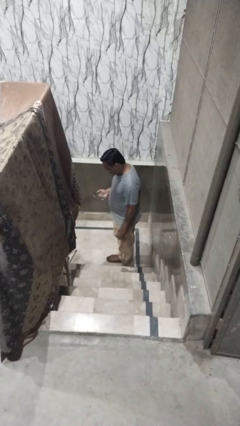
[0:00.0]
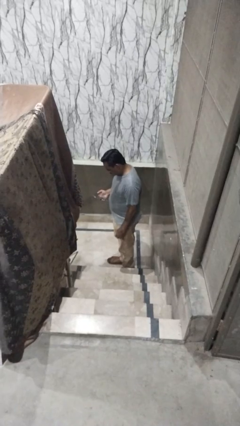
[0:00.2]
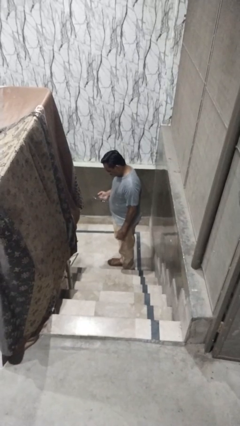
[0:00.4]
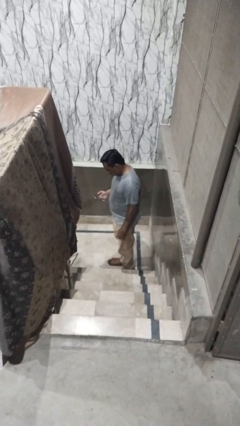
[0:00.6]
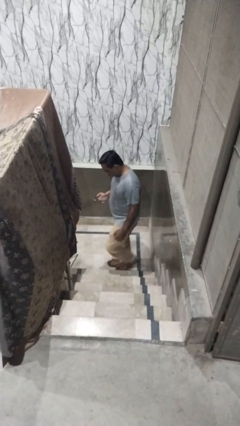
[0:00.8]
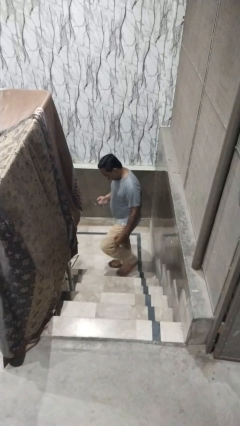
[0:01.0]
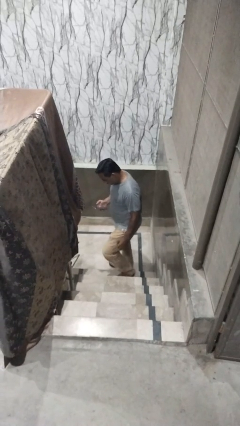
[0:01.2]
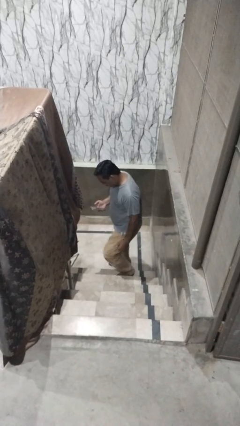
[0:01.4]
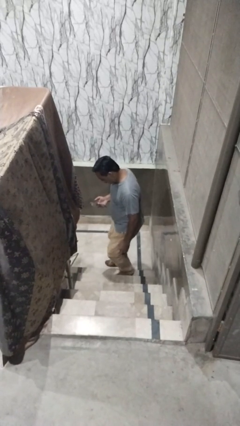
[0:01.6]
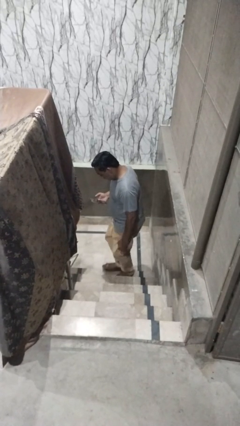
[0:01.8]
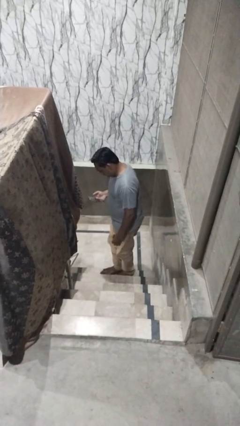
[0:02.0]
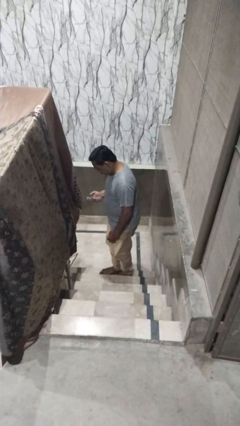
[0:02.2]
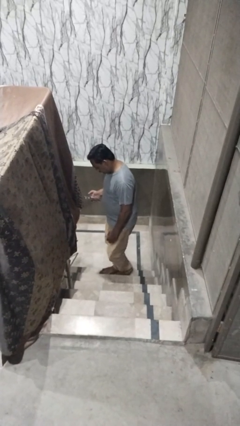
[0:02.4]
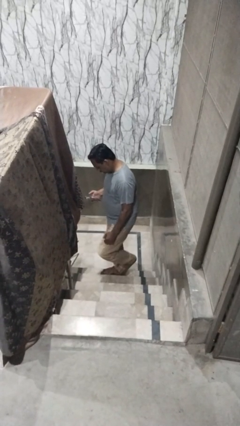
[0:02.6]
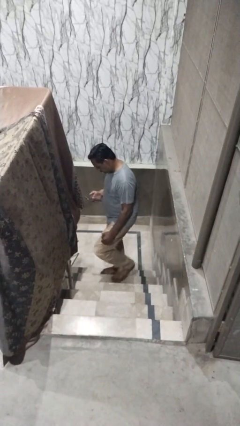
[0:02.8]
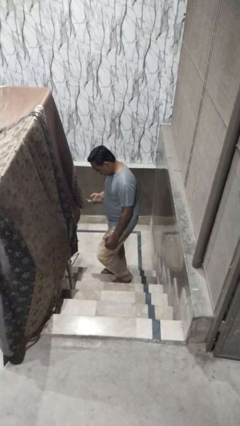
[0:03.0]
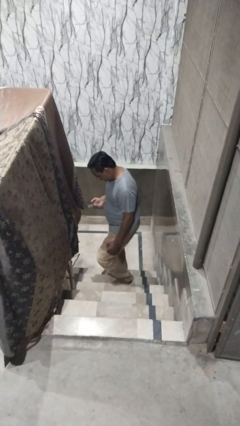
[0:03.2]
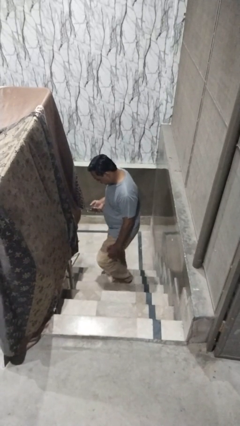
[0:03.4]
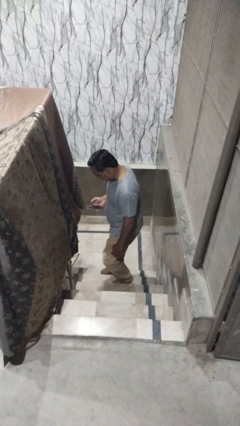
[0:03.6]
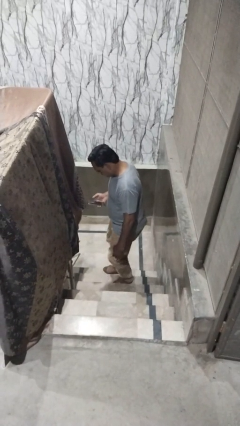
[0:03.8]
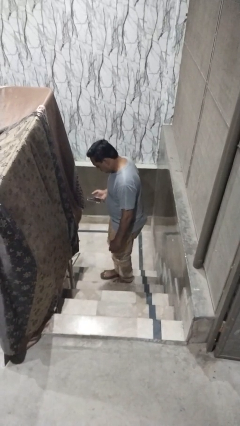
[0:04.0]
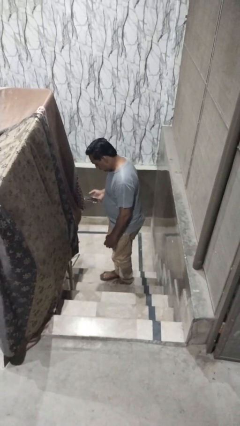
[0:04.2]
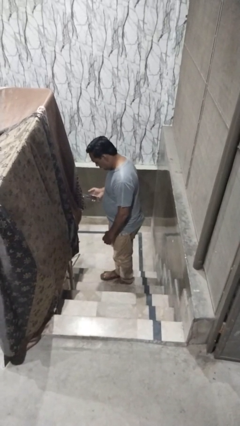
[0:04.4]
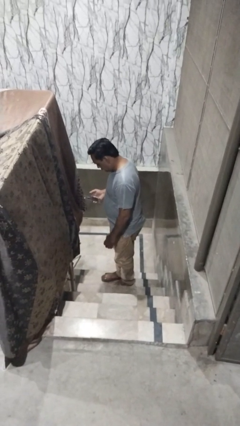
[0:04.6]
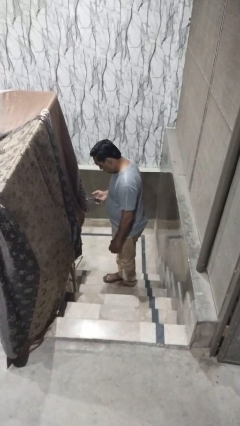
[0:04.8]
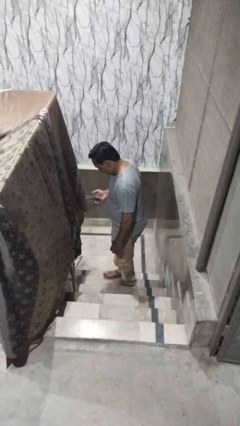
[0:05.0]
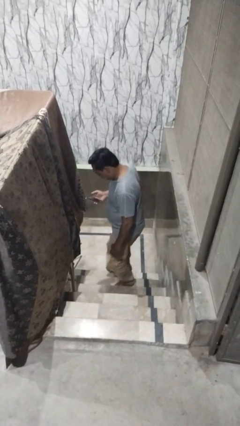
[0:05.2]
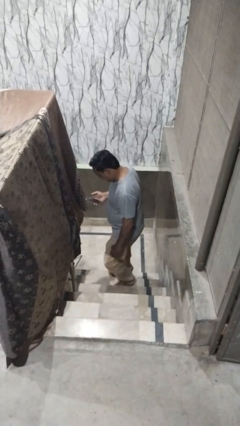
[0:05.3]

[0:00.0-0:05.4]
person climbs up stairs

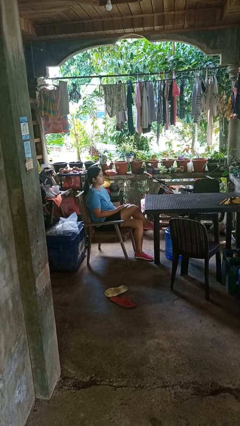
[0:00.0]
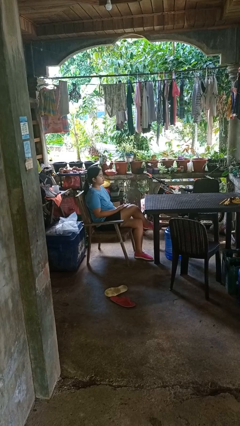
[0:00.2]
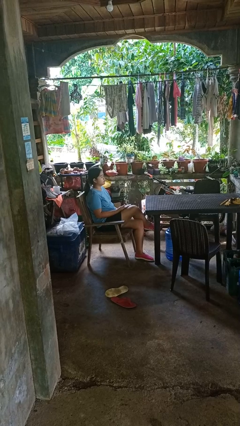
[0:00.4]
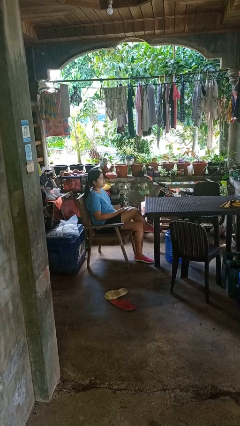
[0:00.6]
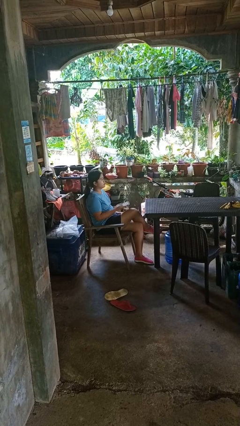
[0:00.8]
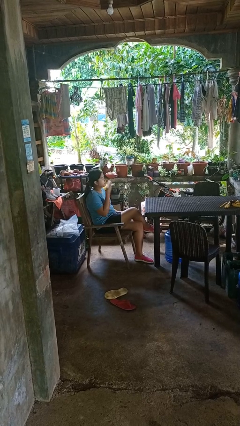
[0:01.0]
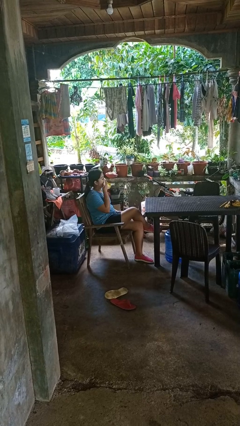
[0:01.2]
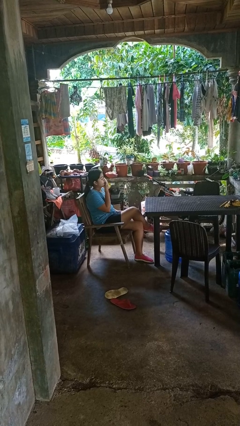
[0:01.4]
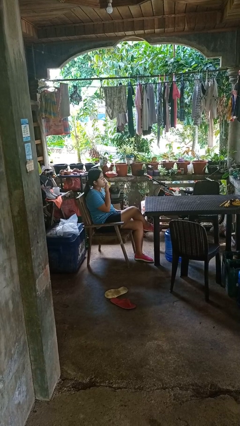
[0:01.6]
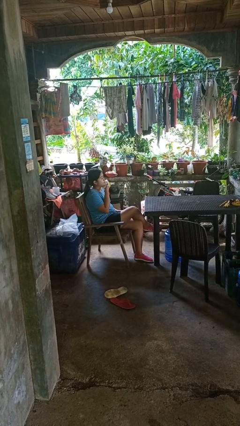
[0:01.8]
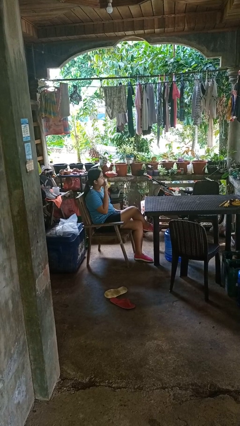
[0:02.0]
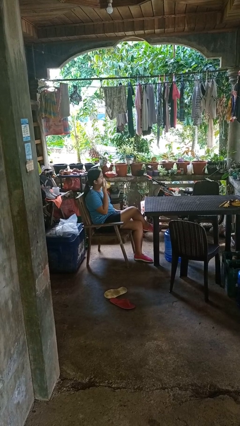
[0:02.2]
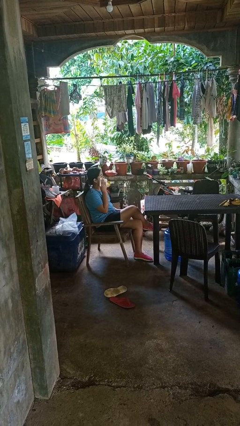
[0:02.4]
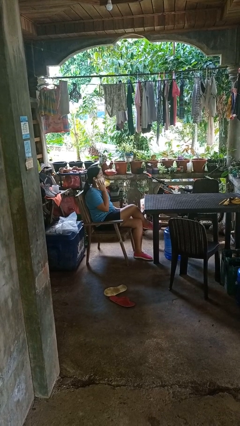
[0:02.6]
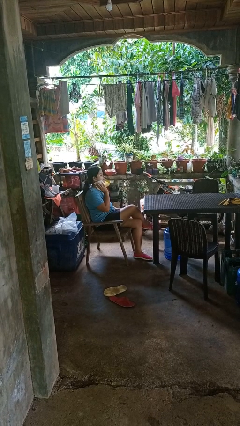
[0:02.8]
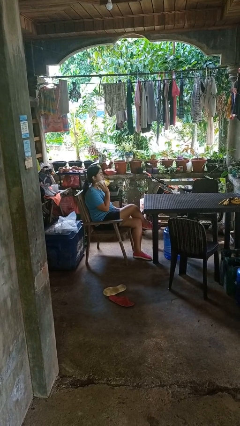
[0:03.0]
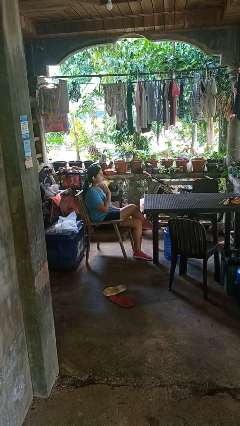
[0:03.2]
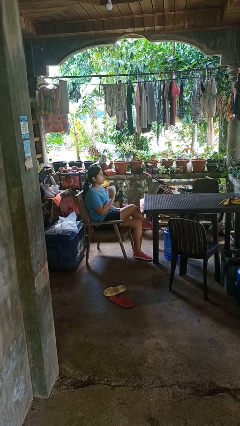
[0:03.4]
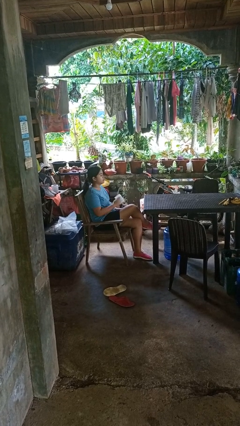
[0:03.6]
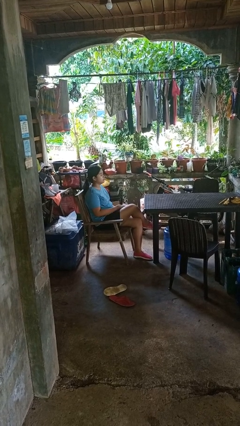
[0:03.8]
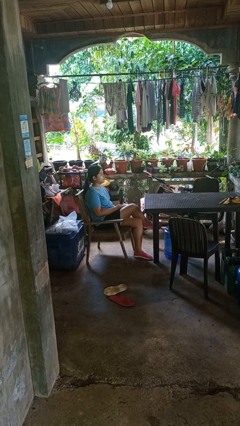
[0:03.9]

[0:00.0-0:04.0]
person wipes mouth with napkin

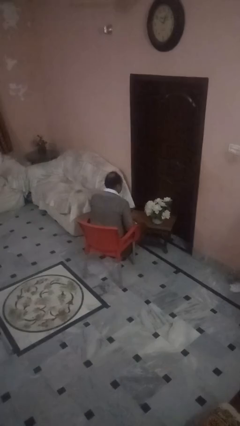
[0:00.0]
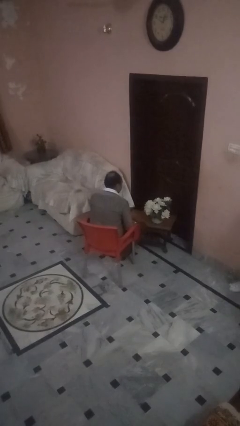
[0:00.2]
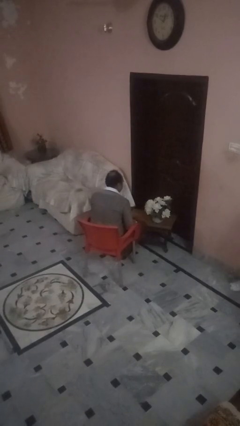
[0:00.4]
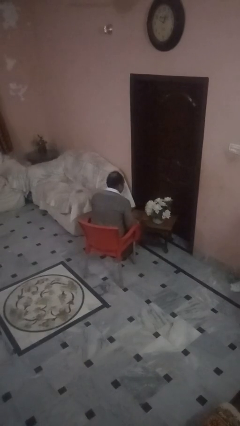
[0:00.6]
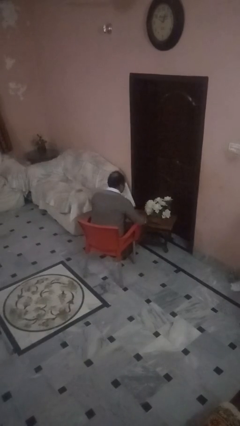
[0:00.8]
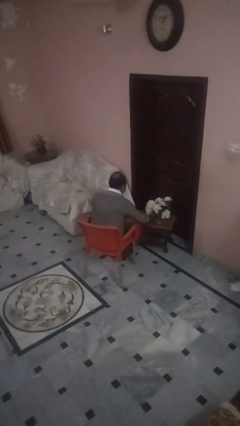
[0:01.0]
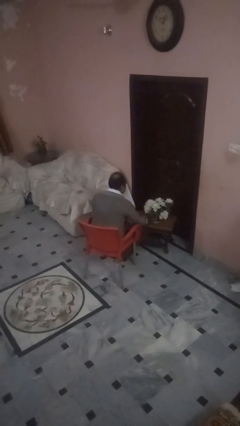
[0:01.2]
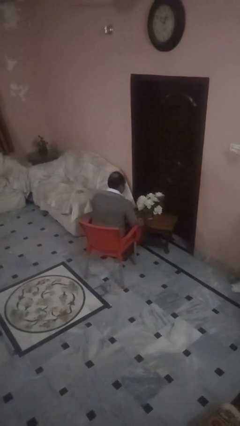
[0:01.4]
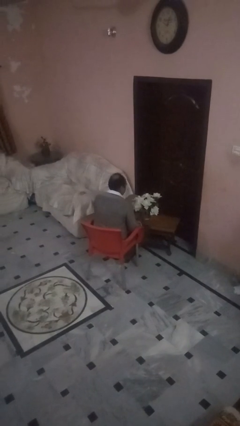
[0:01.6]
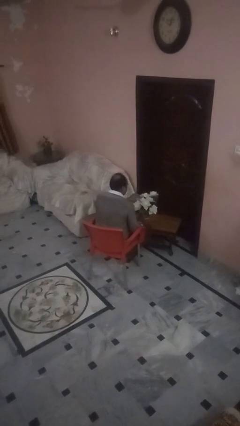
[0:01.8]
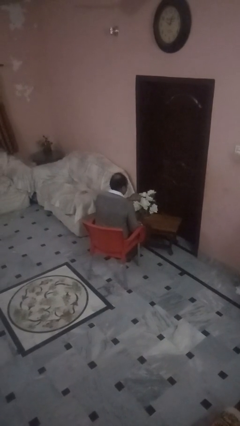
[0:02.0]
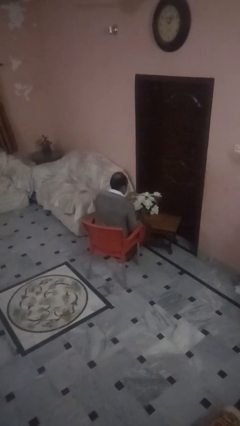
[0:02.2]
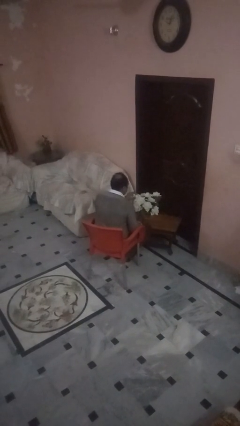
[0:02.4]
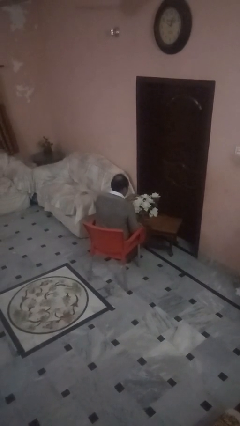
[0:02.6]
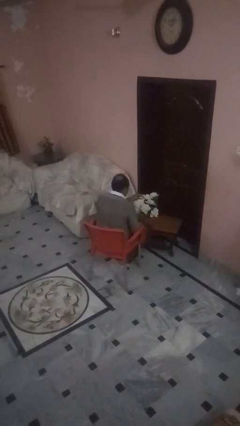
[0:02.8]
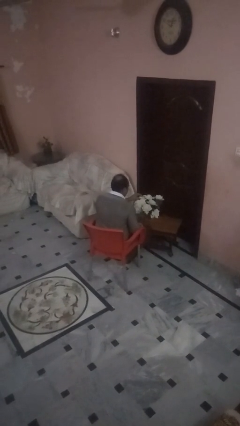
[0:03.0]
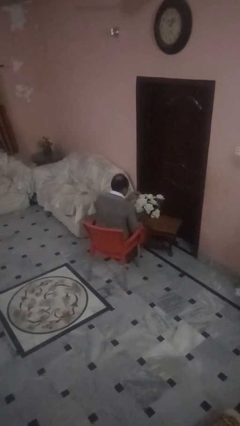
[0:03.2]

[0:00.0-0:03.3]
person arranges flowers in vase

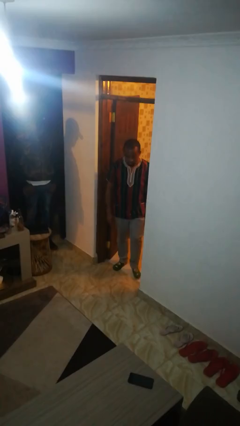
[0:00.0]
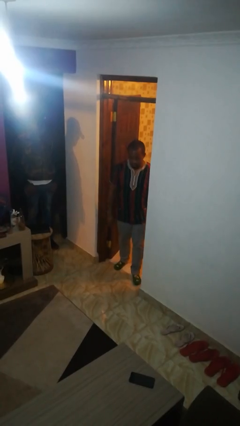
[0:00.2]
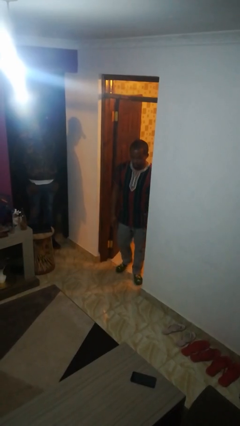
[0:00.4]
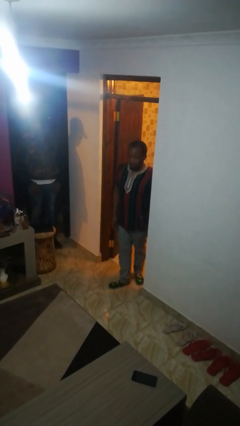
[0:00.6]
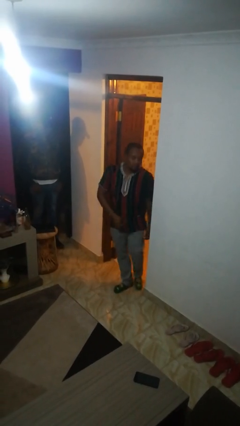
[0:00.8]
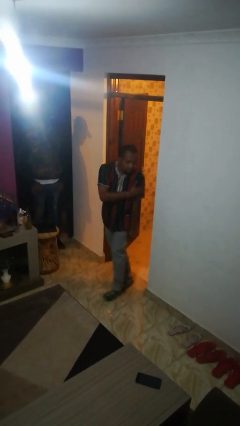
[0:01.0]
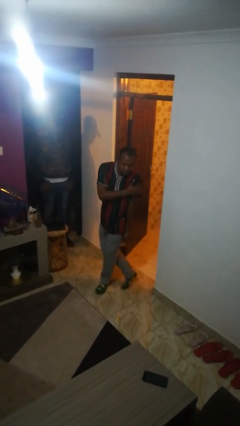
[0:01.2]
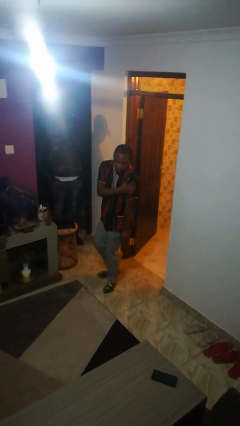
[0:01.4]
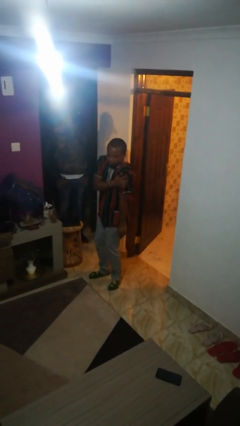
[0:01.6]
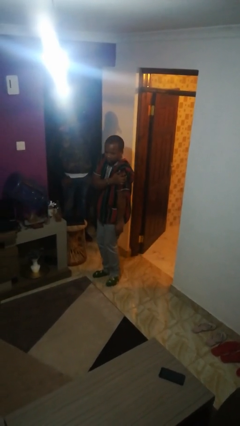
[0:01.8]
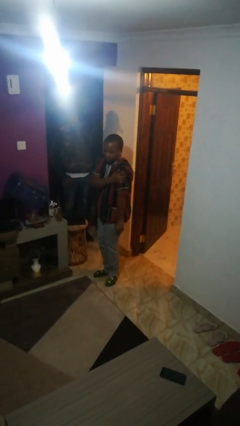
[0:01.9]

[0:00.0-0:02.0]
person bumps into wall

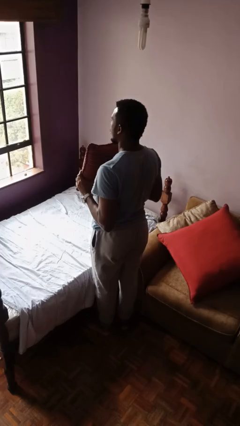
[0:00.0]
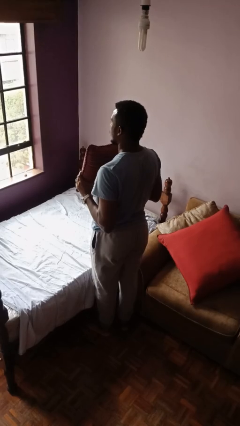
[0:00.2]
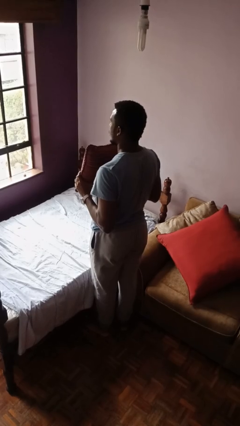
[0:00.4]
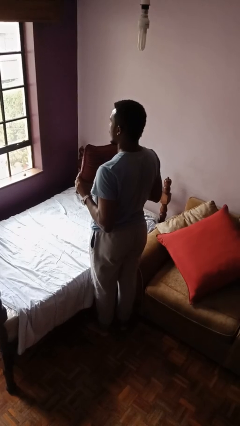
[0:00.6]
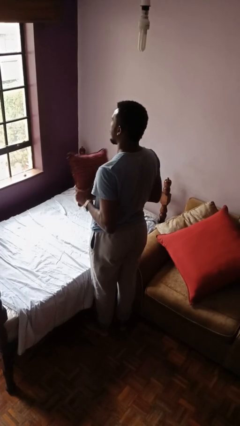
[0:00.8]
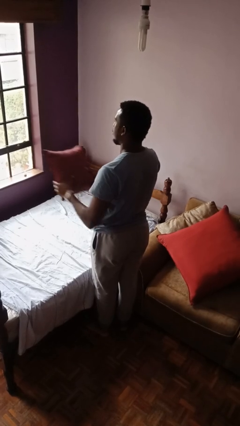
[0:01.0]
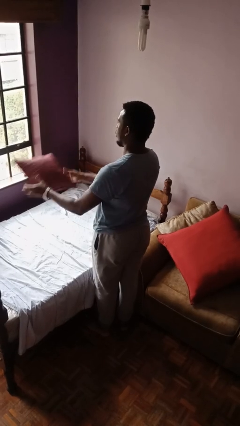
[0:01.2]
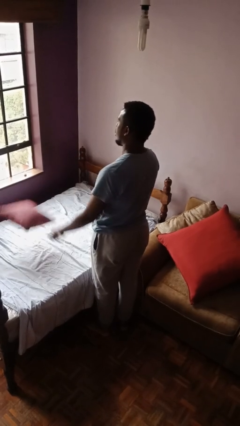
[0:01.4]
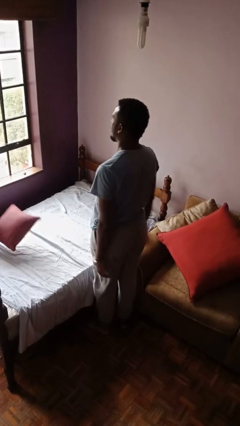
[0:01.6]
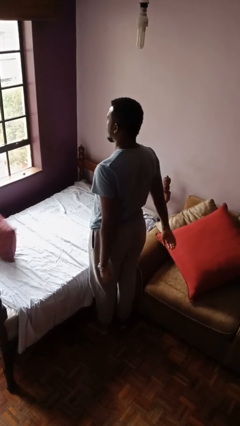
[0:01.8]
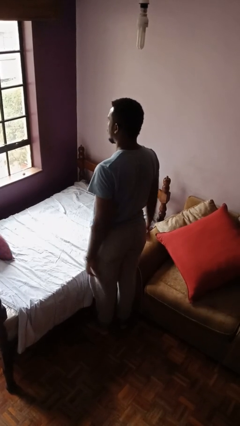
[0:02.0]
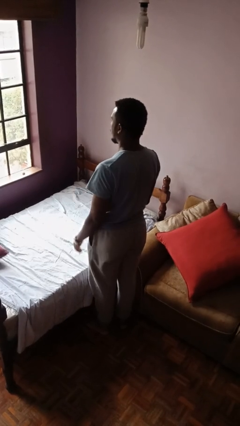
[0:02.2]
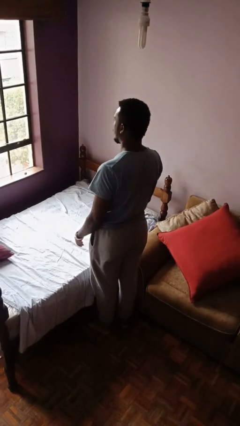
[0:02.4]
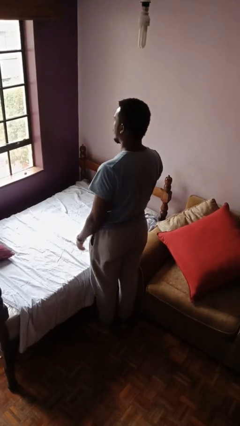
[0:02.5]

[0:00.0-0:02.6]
person throws object on bed

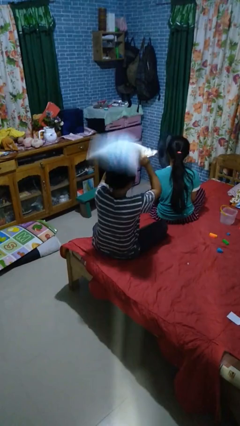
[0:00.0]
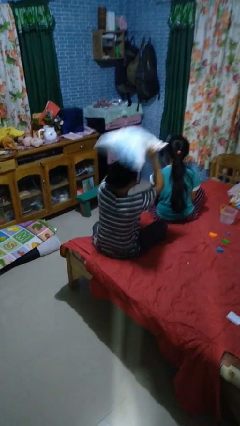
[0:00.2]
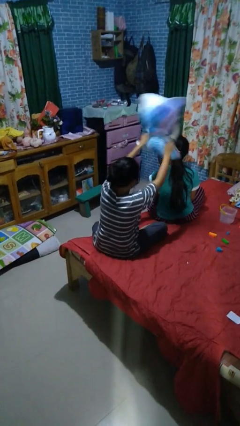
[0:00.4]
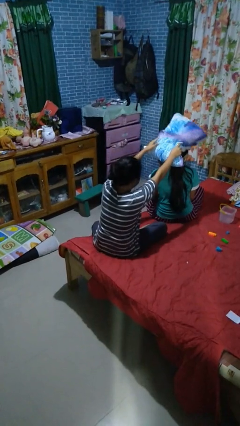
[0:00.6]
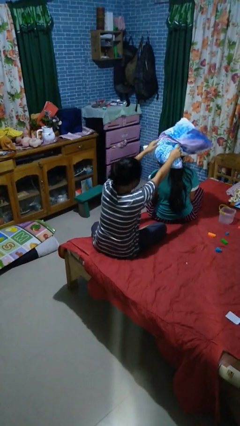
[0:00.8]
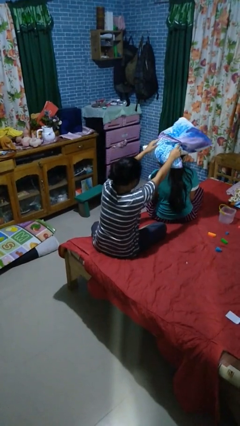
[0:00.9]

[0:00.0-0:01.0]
person hits person with pillow
